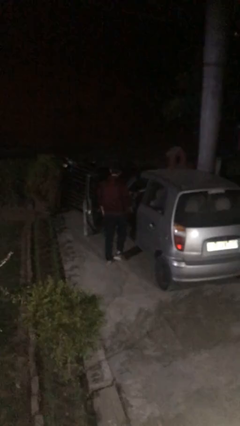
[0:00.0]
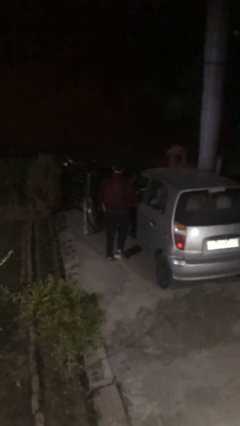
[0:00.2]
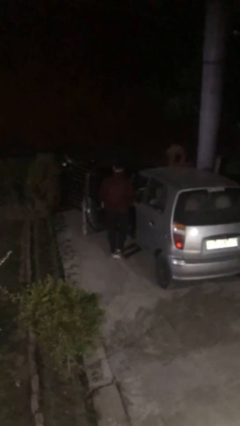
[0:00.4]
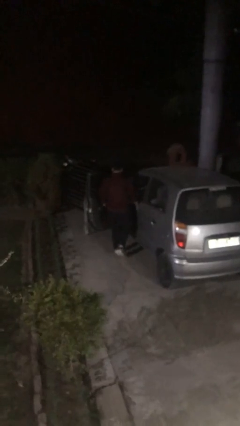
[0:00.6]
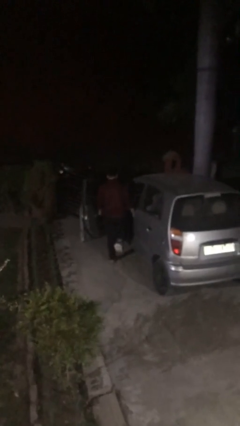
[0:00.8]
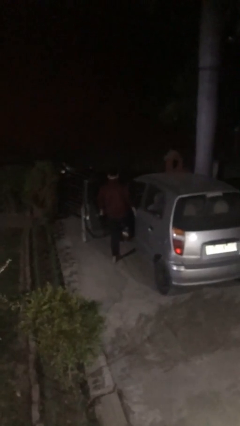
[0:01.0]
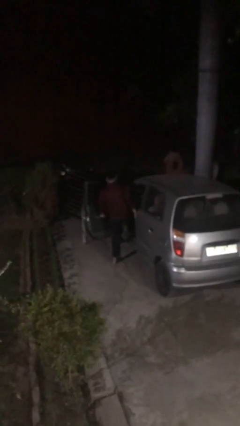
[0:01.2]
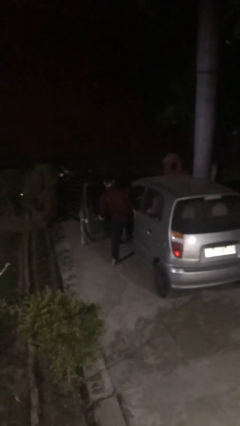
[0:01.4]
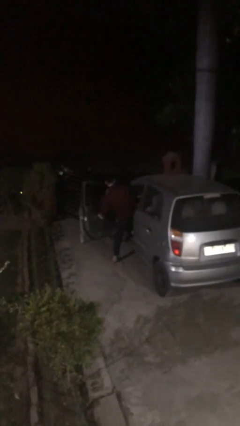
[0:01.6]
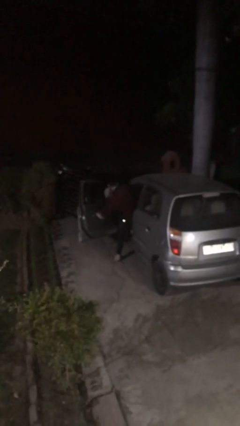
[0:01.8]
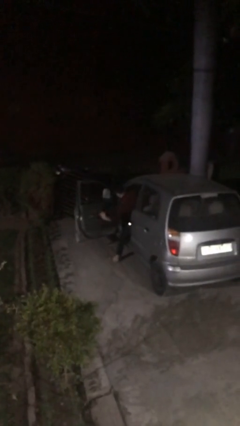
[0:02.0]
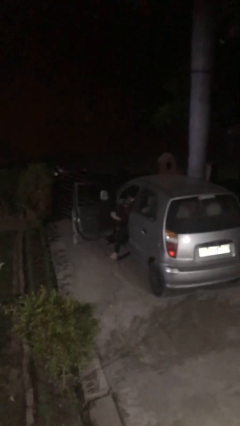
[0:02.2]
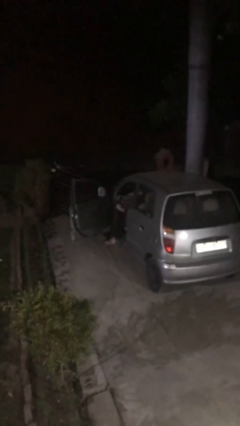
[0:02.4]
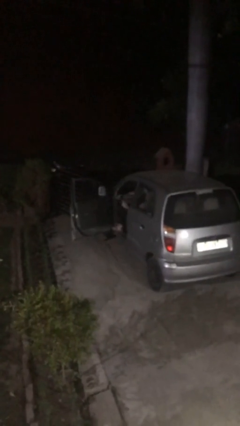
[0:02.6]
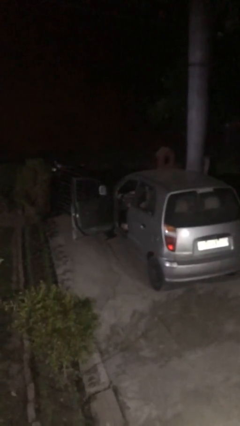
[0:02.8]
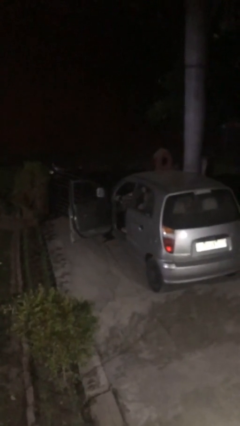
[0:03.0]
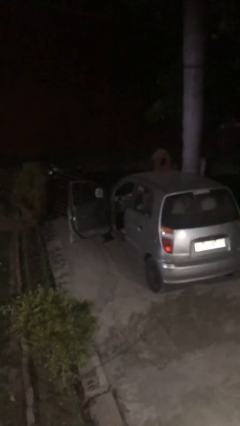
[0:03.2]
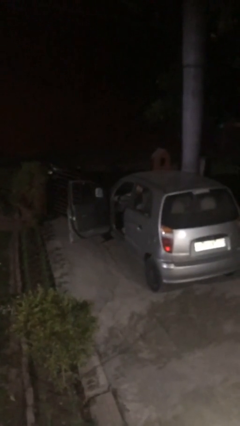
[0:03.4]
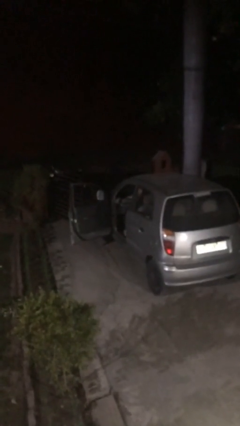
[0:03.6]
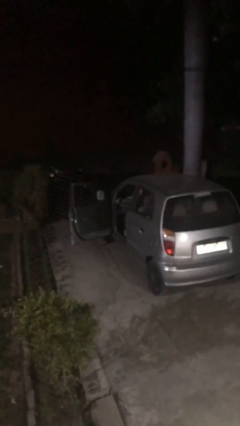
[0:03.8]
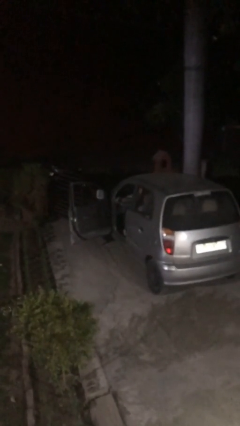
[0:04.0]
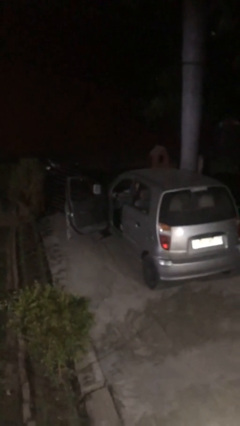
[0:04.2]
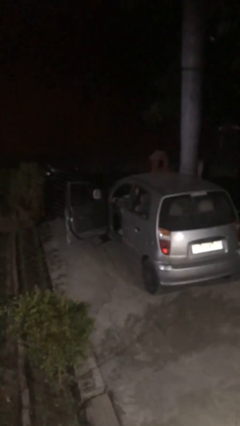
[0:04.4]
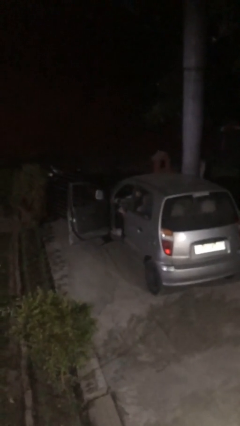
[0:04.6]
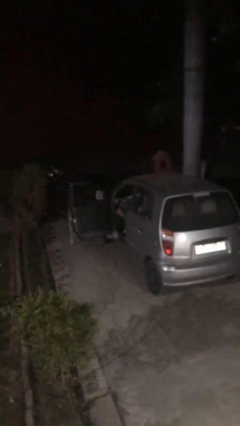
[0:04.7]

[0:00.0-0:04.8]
person enters car

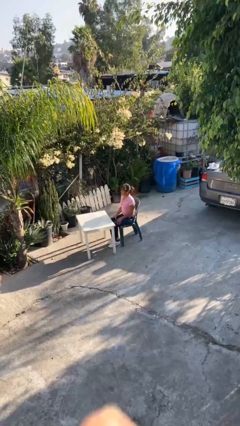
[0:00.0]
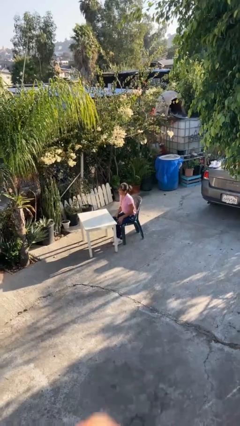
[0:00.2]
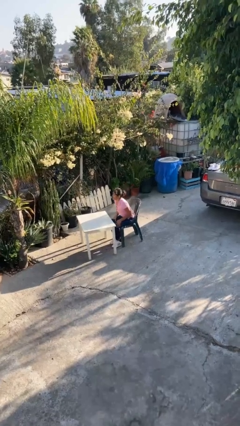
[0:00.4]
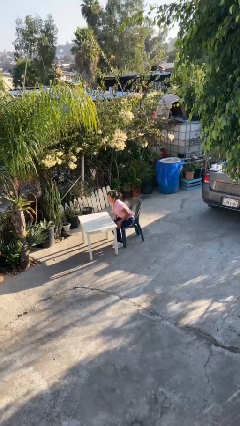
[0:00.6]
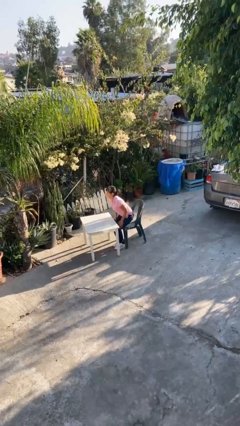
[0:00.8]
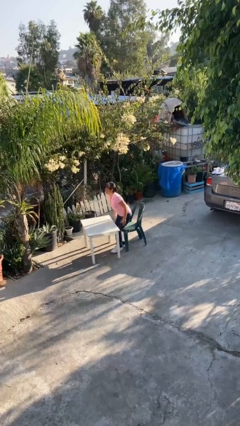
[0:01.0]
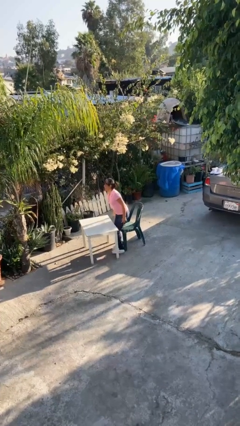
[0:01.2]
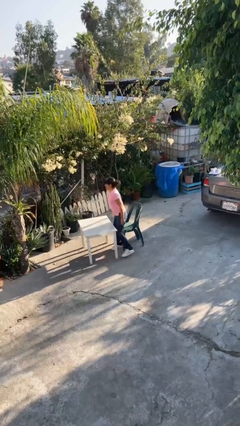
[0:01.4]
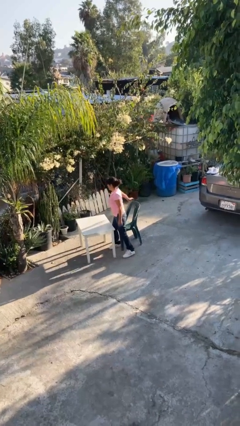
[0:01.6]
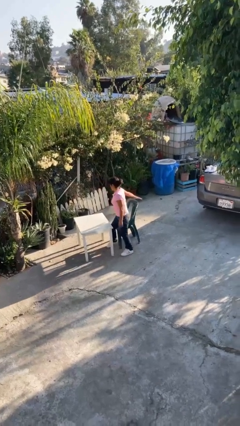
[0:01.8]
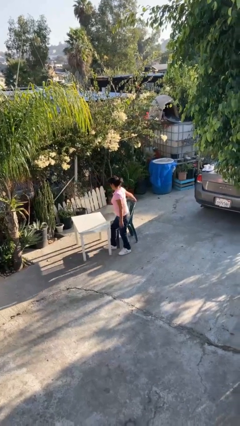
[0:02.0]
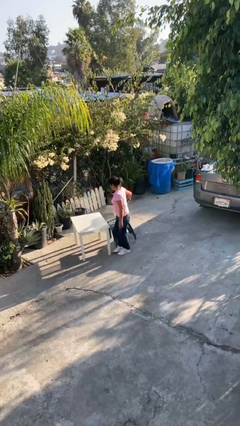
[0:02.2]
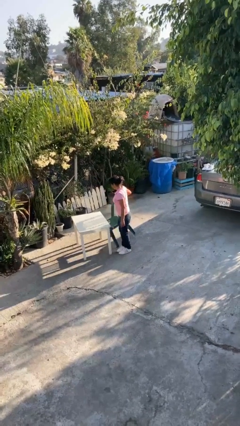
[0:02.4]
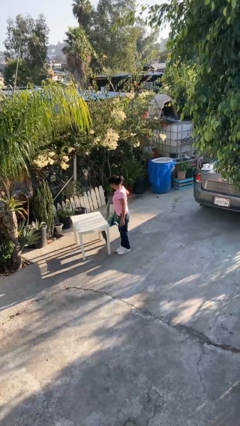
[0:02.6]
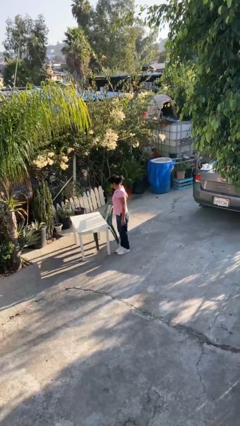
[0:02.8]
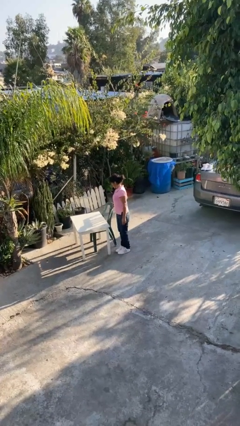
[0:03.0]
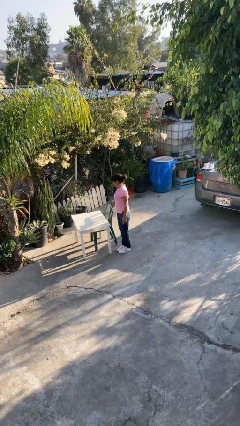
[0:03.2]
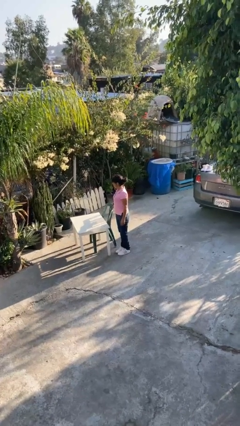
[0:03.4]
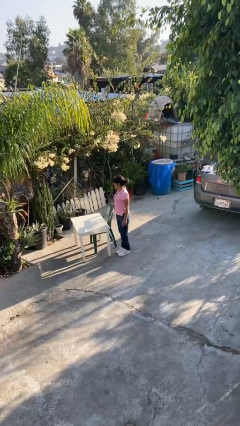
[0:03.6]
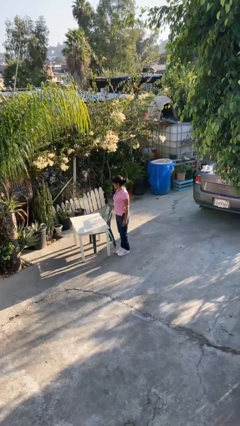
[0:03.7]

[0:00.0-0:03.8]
person stands up

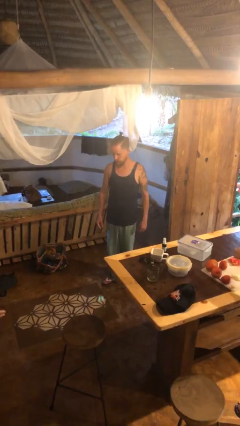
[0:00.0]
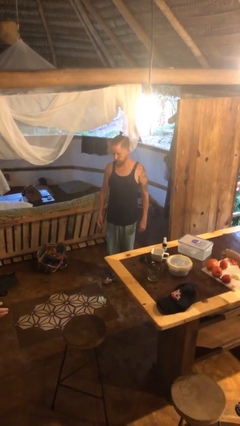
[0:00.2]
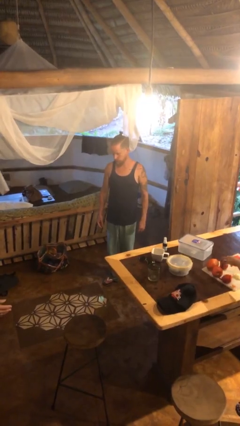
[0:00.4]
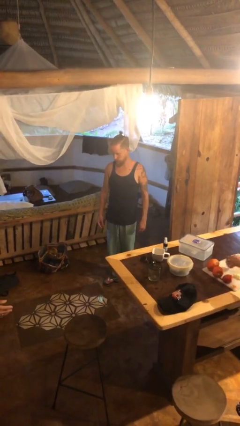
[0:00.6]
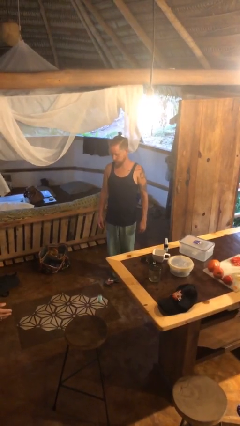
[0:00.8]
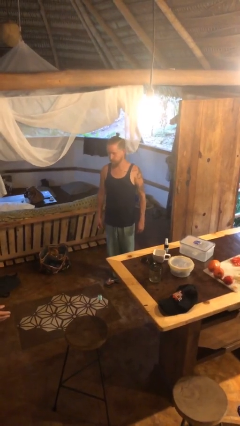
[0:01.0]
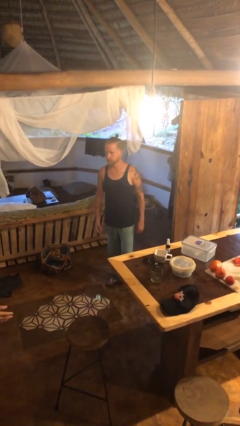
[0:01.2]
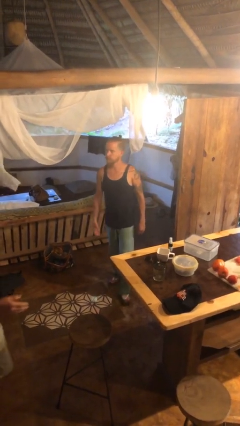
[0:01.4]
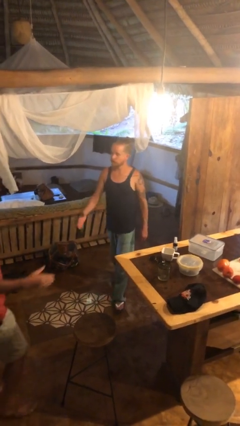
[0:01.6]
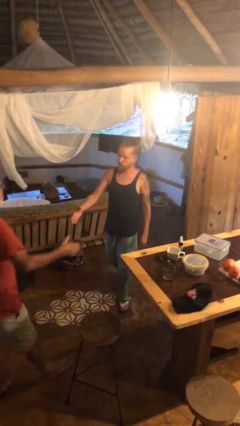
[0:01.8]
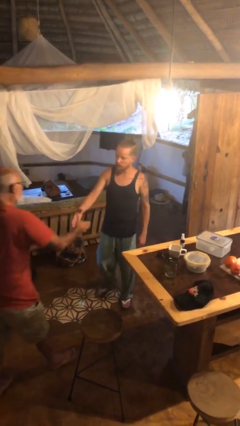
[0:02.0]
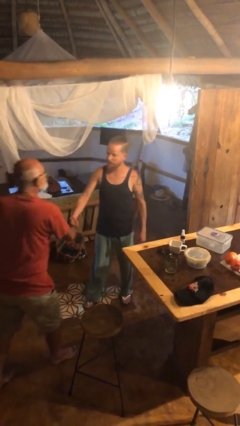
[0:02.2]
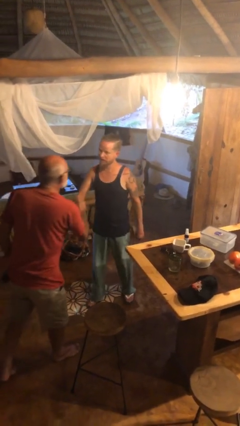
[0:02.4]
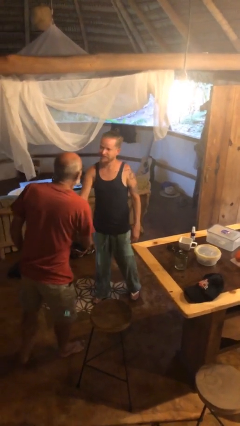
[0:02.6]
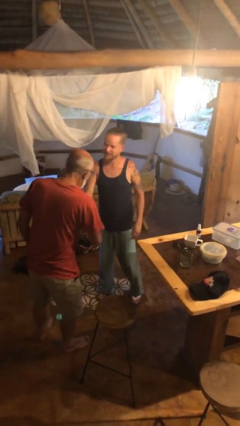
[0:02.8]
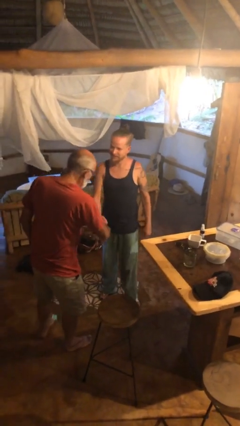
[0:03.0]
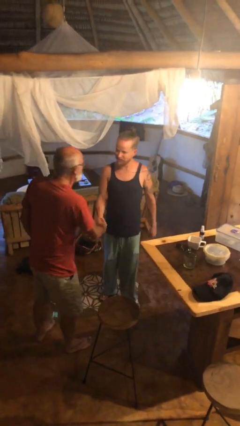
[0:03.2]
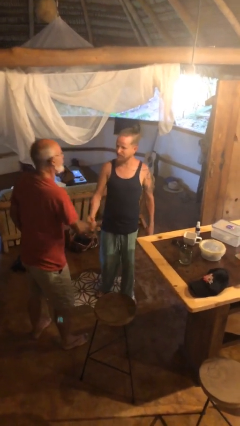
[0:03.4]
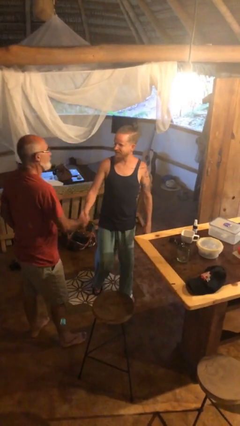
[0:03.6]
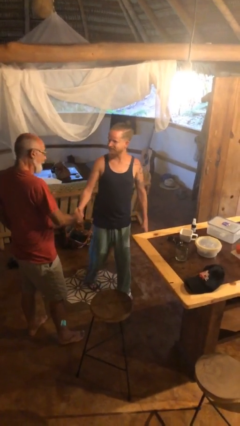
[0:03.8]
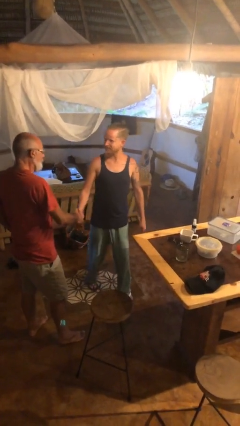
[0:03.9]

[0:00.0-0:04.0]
person shakes hand

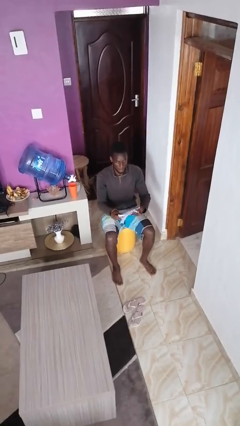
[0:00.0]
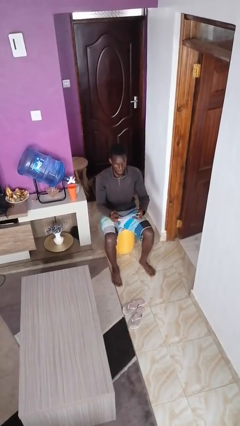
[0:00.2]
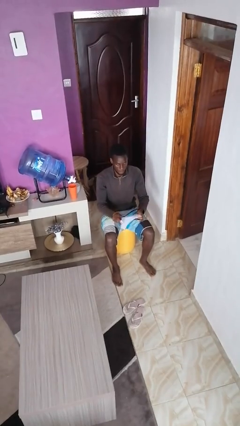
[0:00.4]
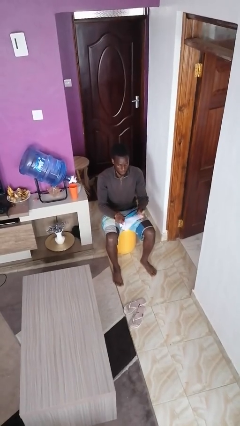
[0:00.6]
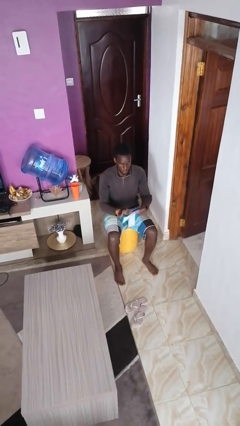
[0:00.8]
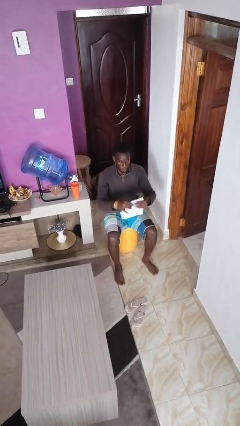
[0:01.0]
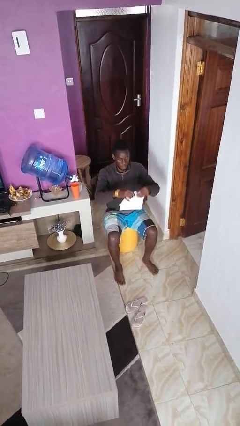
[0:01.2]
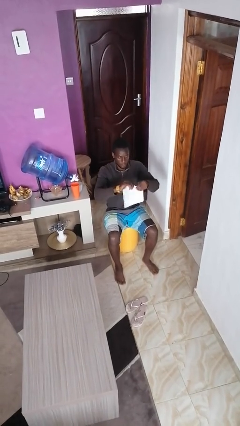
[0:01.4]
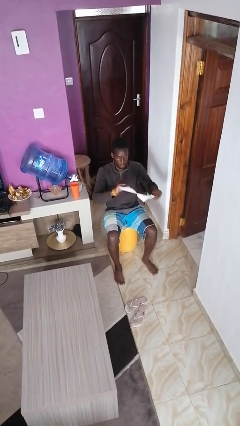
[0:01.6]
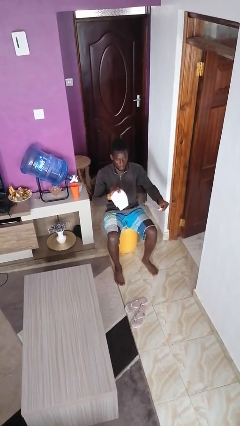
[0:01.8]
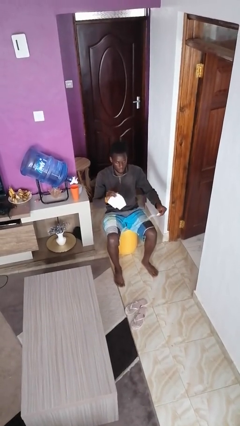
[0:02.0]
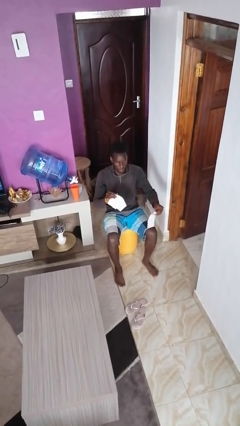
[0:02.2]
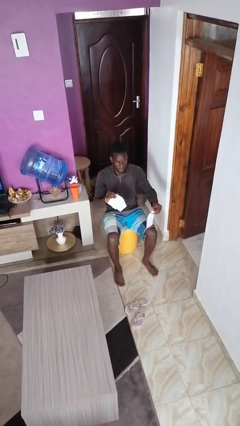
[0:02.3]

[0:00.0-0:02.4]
person tears paper

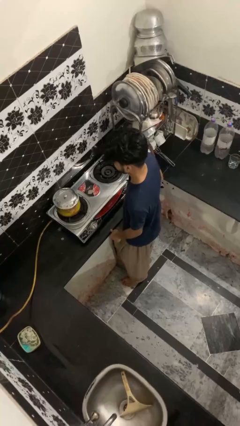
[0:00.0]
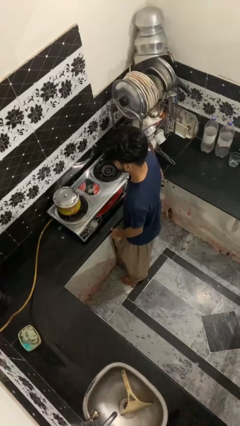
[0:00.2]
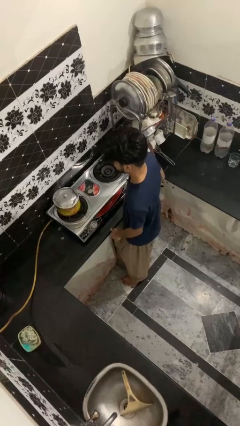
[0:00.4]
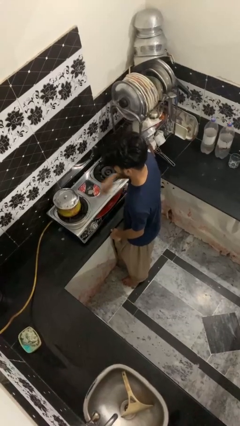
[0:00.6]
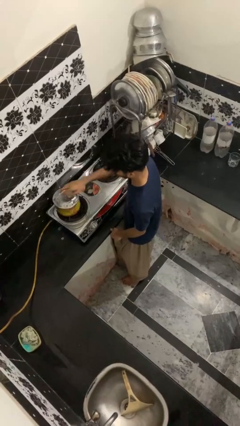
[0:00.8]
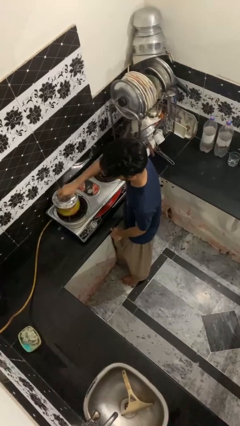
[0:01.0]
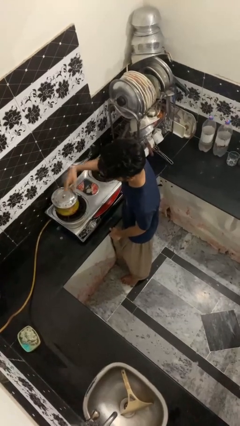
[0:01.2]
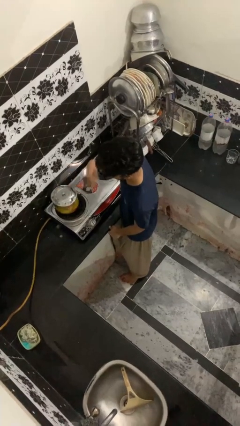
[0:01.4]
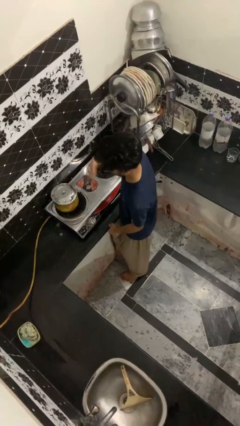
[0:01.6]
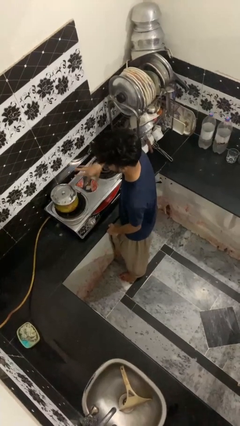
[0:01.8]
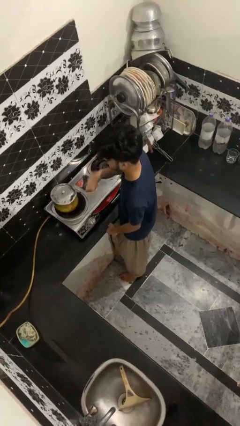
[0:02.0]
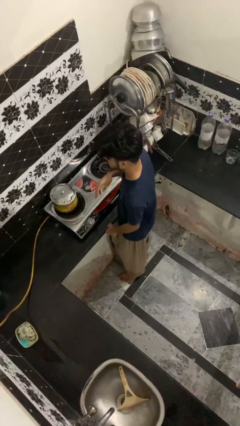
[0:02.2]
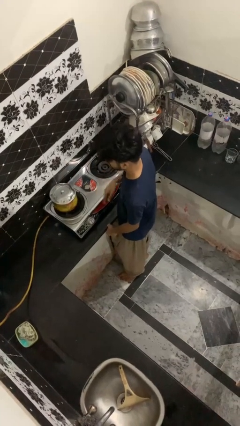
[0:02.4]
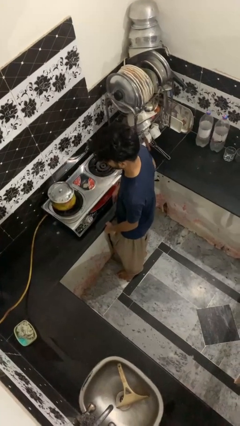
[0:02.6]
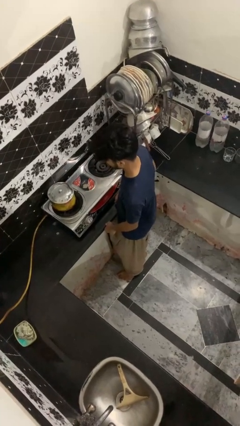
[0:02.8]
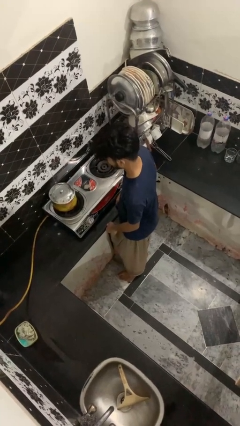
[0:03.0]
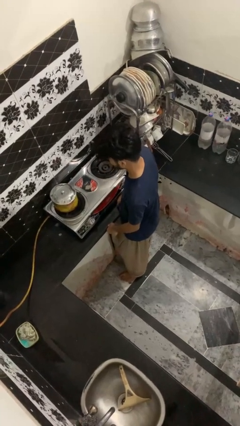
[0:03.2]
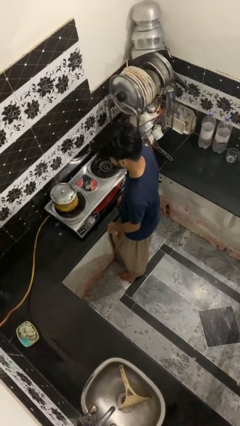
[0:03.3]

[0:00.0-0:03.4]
person burns hand
